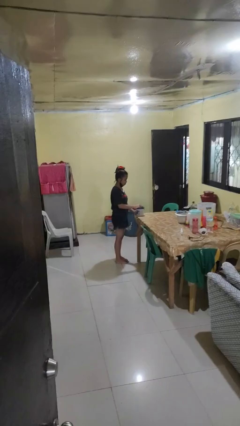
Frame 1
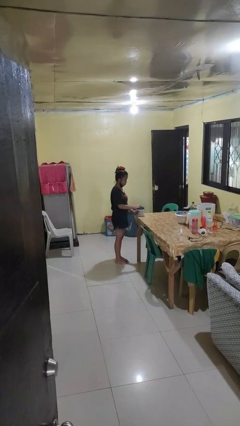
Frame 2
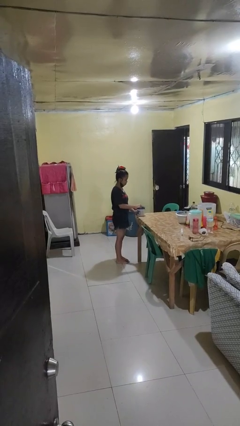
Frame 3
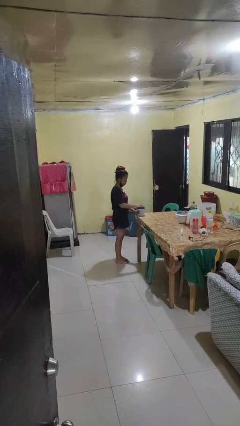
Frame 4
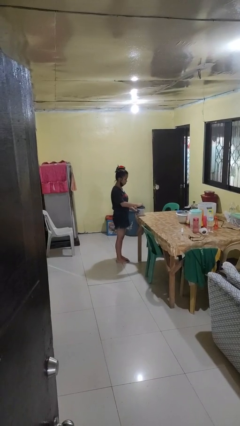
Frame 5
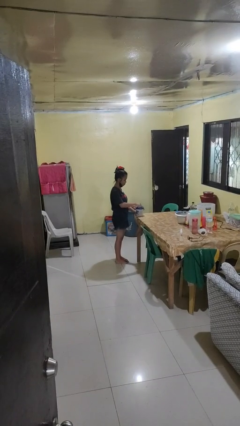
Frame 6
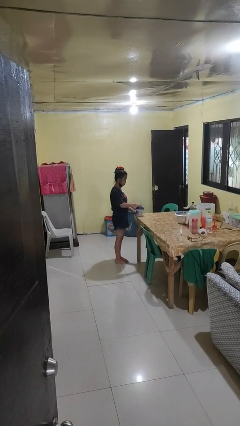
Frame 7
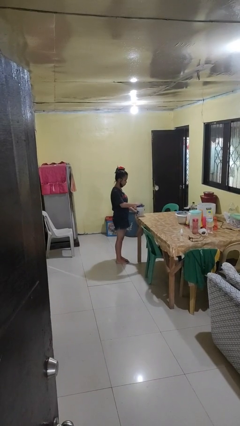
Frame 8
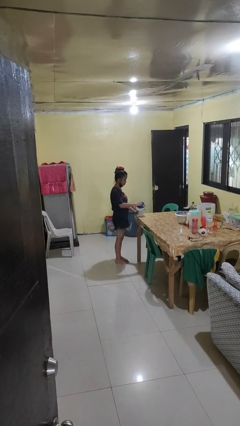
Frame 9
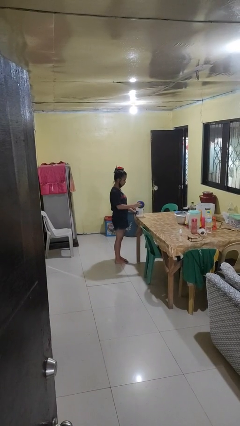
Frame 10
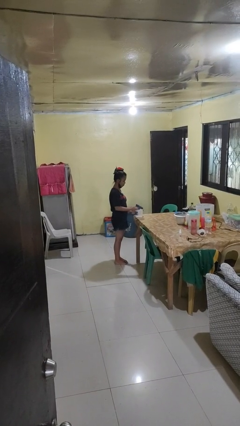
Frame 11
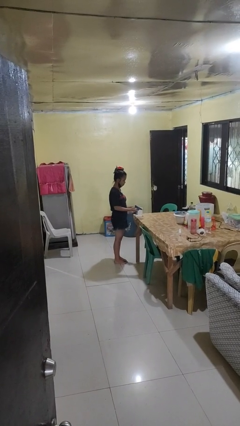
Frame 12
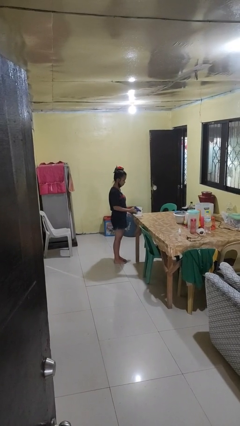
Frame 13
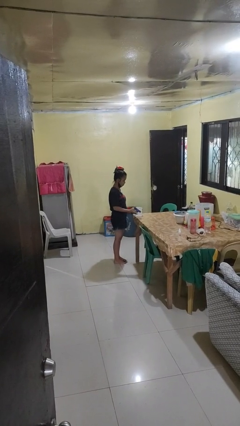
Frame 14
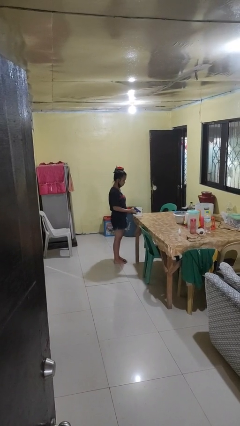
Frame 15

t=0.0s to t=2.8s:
person opens jar

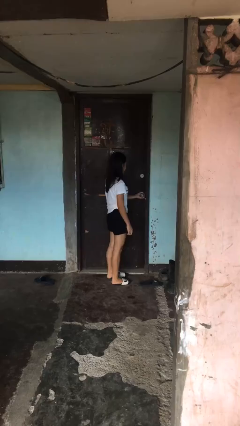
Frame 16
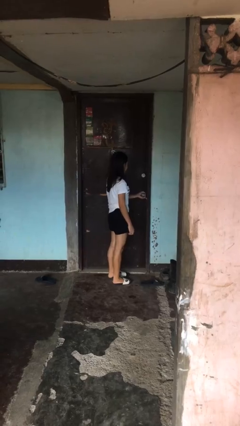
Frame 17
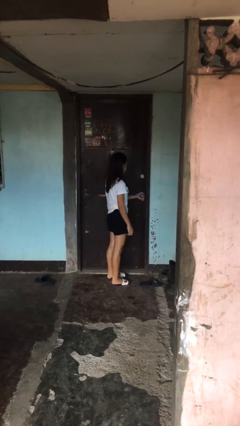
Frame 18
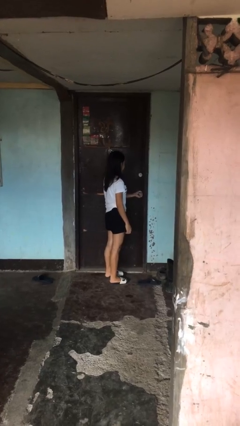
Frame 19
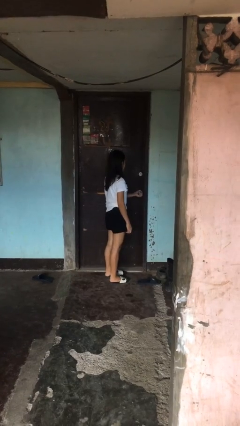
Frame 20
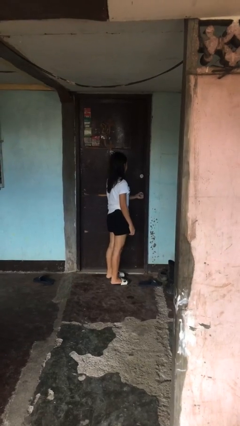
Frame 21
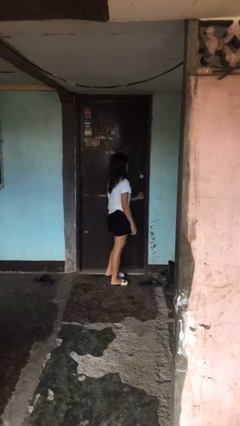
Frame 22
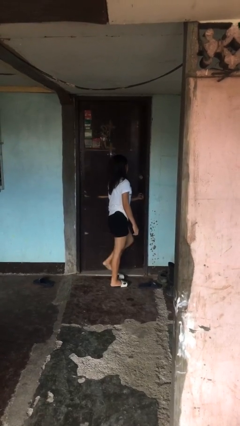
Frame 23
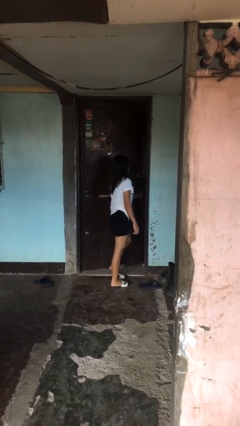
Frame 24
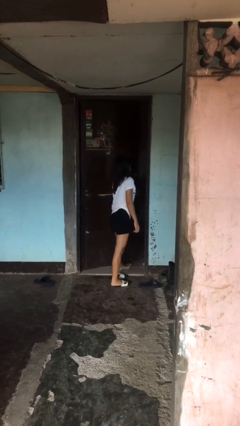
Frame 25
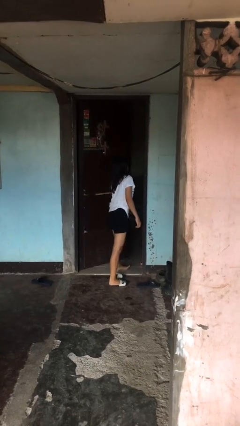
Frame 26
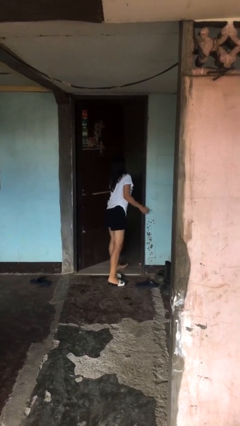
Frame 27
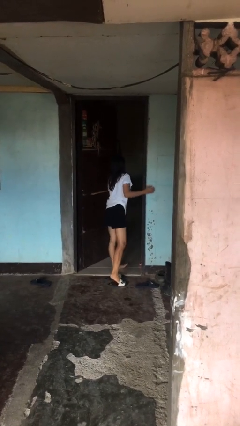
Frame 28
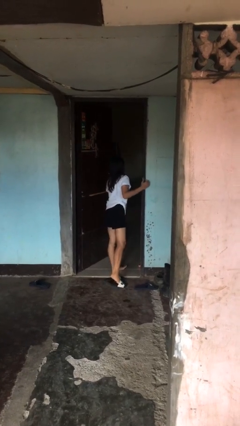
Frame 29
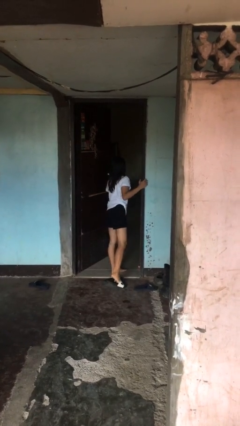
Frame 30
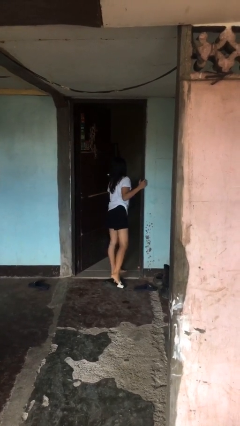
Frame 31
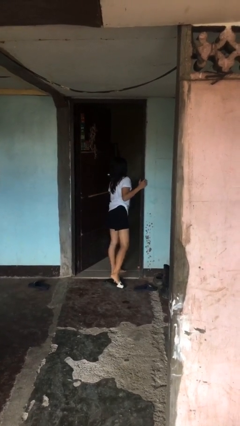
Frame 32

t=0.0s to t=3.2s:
person opens facility door

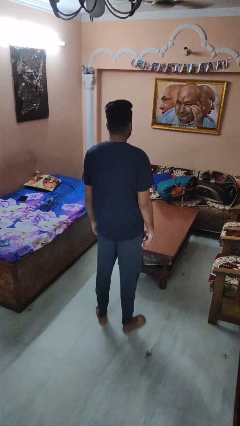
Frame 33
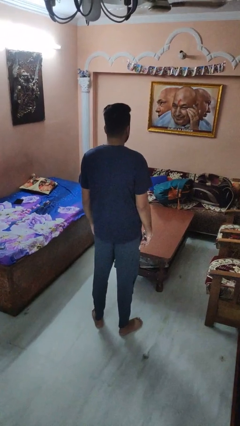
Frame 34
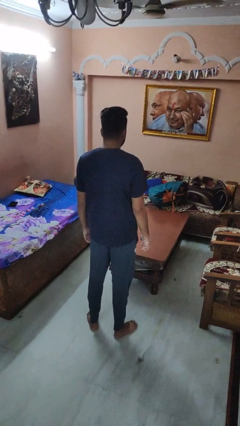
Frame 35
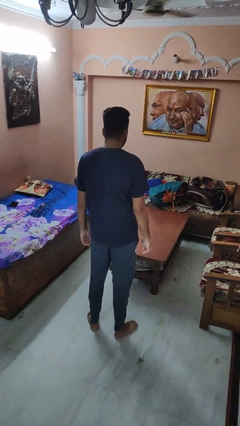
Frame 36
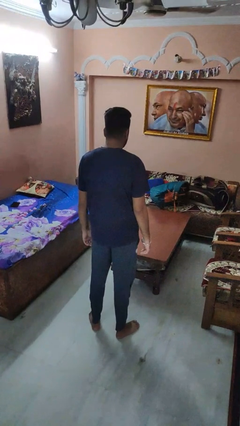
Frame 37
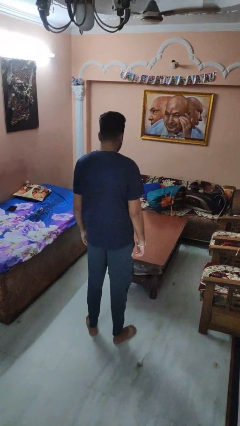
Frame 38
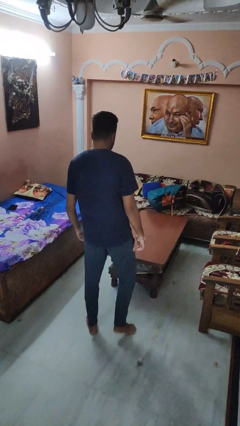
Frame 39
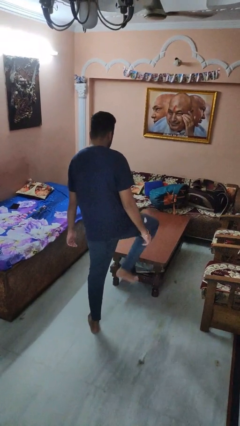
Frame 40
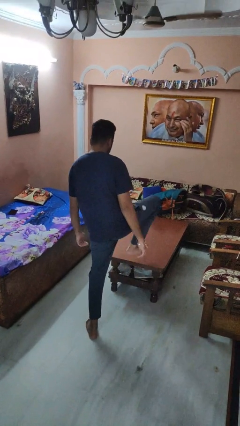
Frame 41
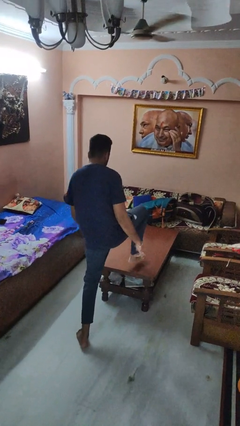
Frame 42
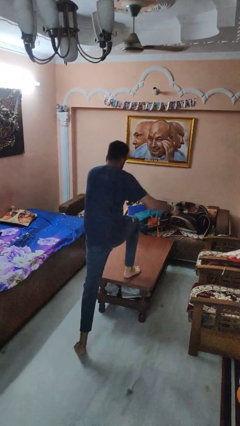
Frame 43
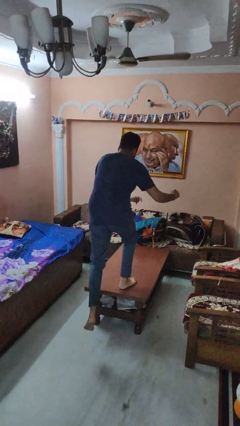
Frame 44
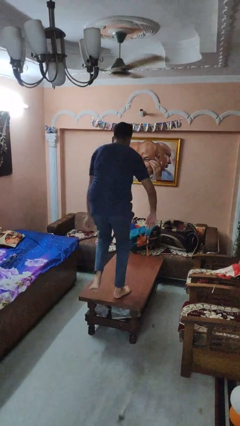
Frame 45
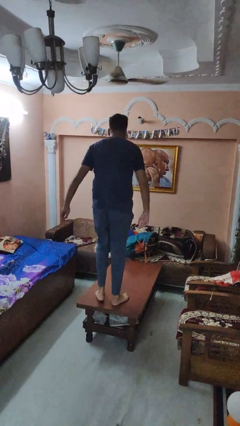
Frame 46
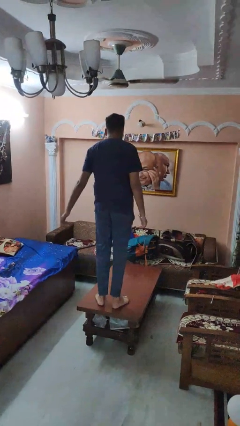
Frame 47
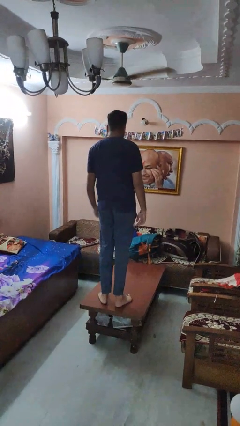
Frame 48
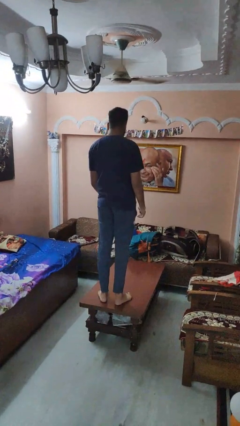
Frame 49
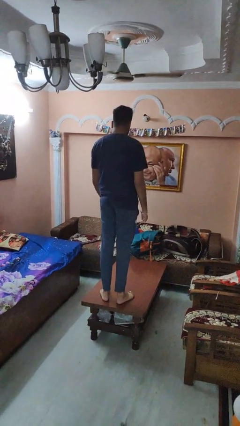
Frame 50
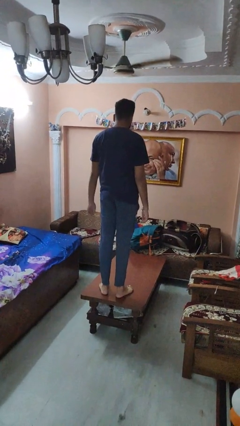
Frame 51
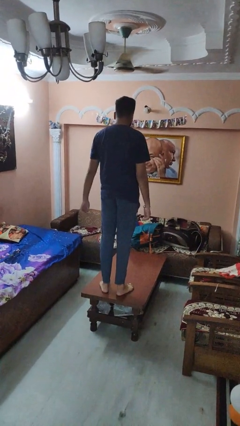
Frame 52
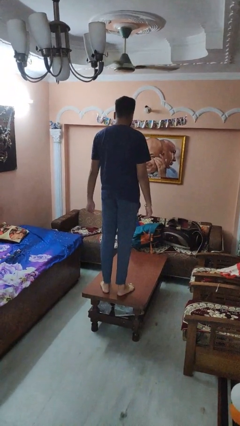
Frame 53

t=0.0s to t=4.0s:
person climbs on table

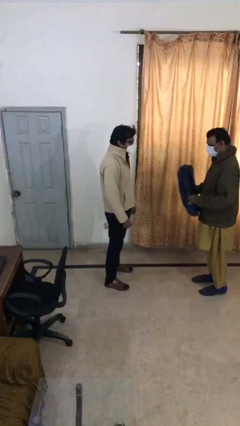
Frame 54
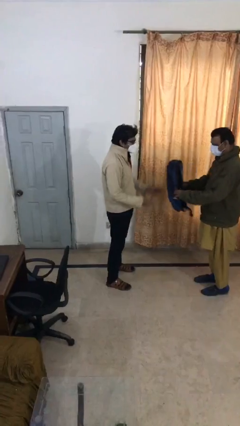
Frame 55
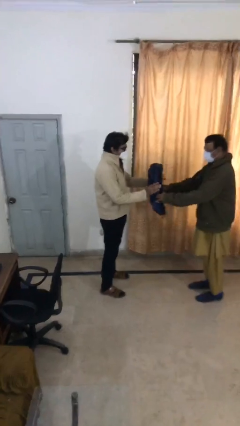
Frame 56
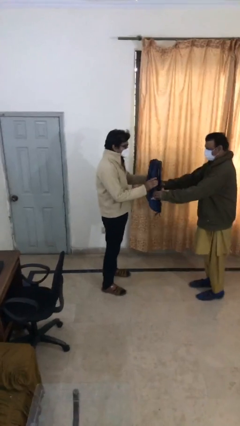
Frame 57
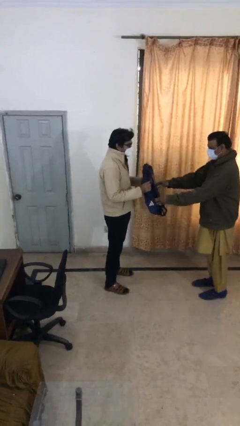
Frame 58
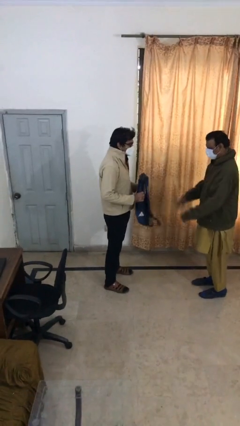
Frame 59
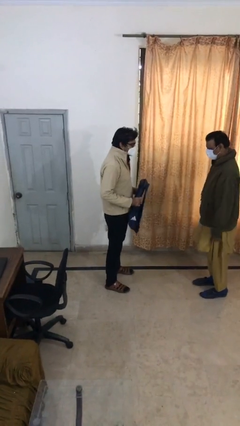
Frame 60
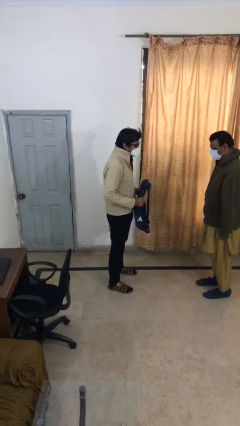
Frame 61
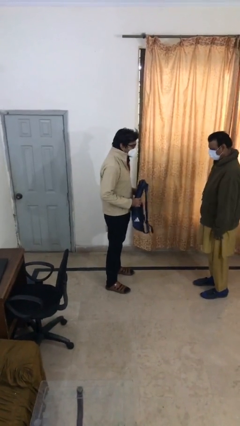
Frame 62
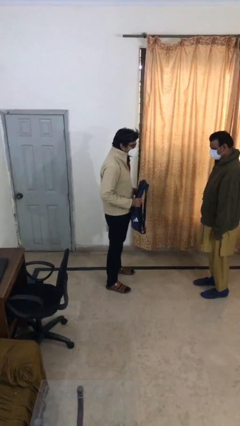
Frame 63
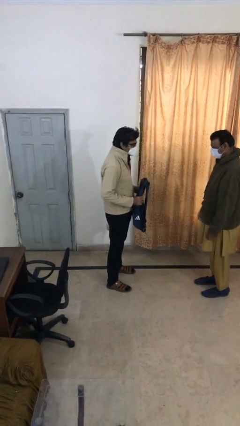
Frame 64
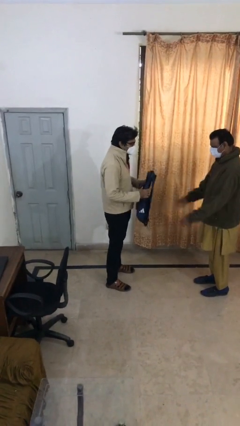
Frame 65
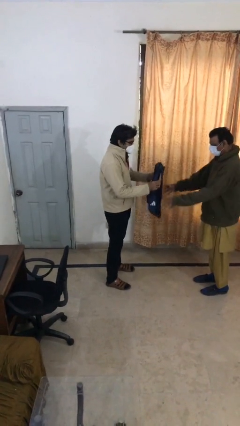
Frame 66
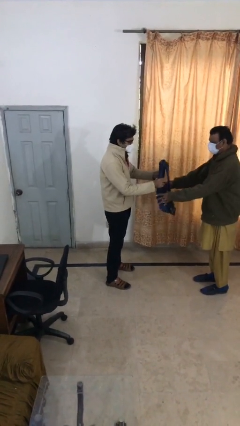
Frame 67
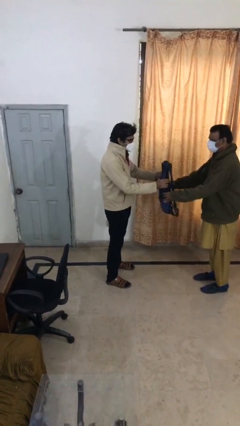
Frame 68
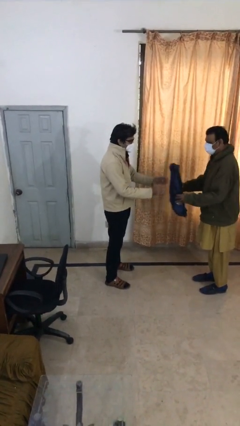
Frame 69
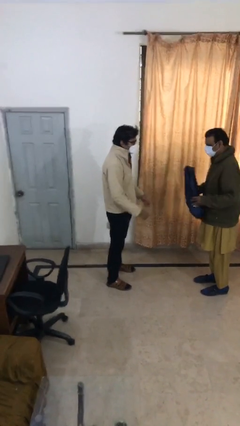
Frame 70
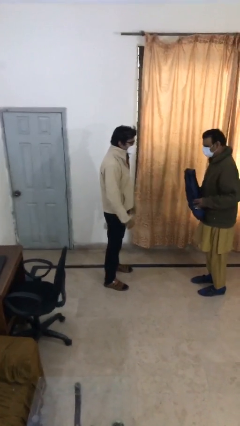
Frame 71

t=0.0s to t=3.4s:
person transfers object to person

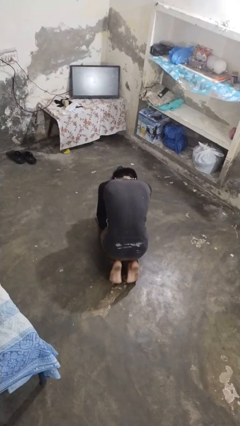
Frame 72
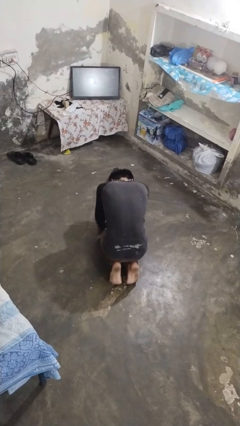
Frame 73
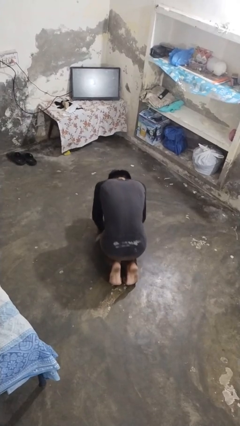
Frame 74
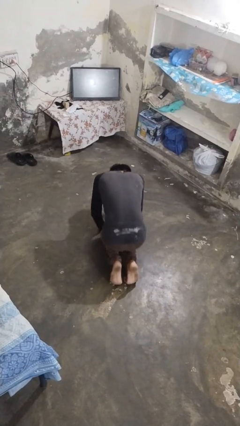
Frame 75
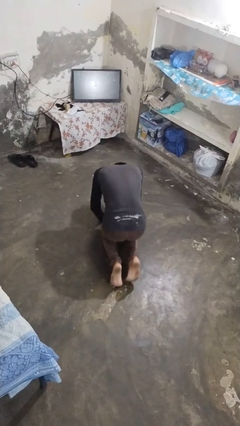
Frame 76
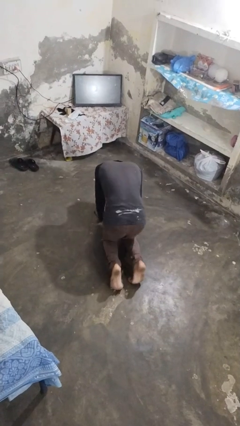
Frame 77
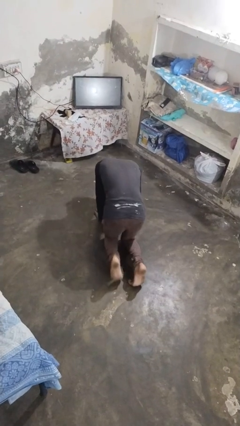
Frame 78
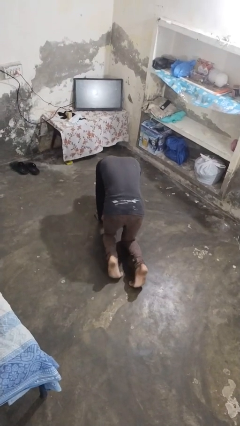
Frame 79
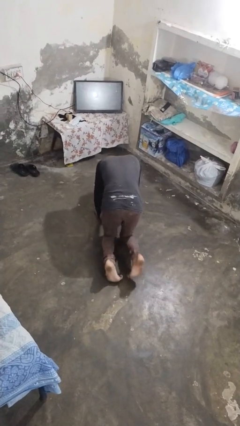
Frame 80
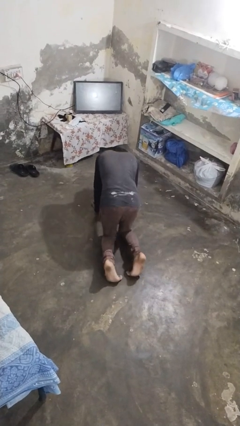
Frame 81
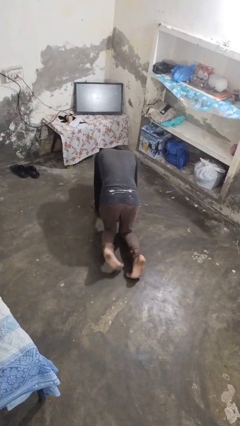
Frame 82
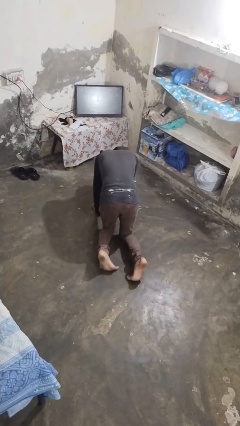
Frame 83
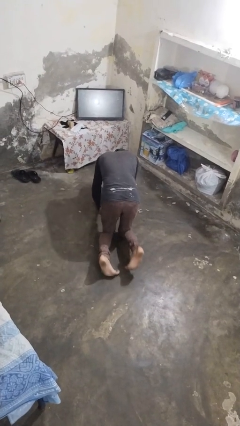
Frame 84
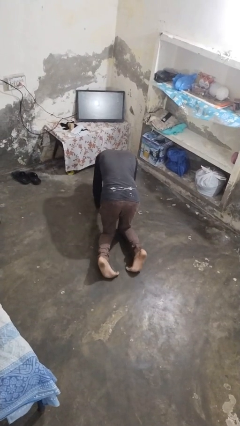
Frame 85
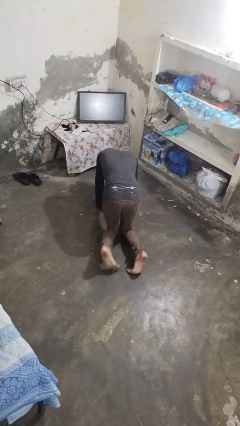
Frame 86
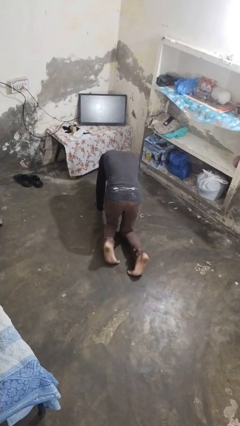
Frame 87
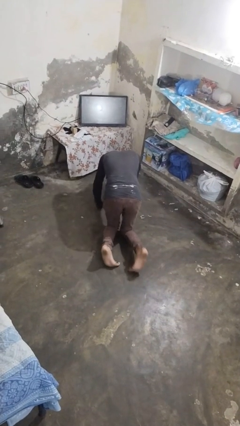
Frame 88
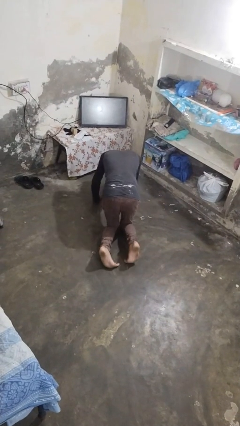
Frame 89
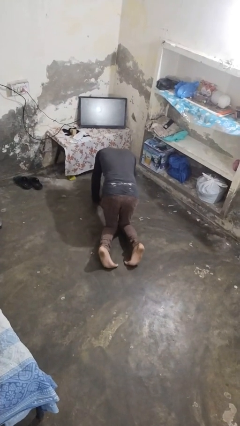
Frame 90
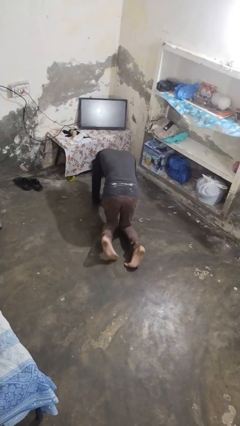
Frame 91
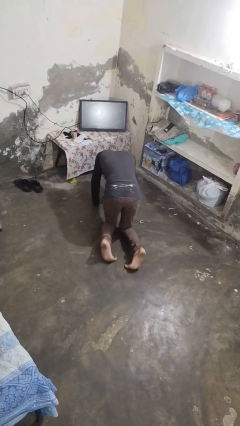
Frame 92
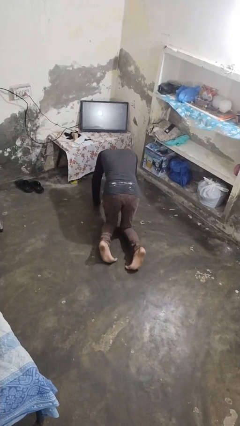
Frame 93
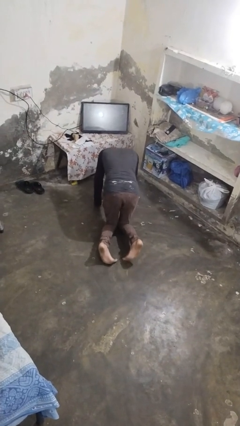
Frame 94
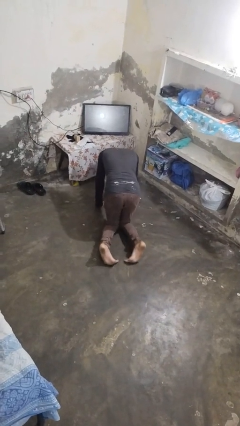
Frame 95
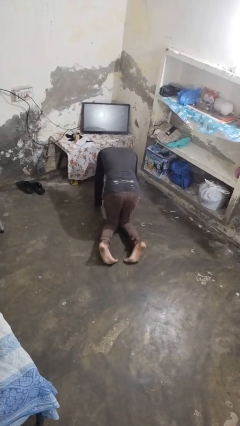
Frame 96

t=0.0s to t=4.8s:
person crawls
